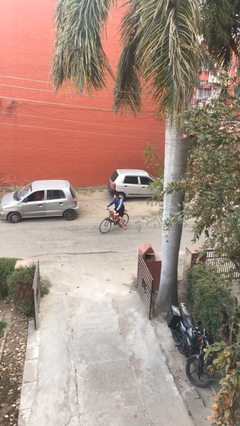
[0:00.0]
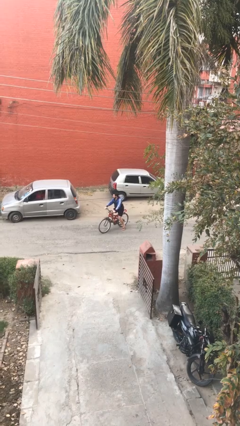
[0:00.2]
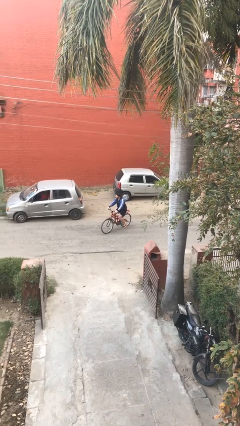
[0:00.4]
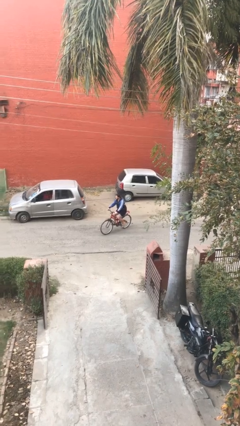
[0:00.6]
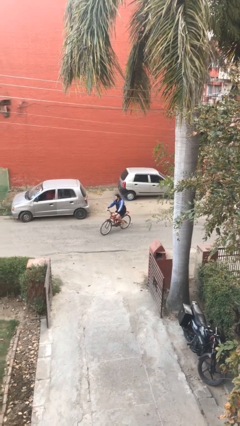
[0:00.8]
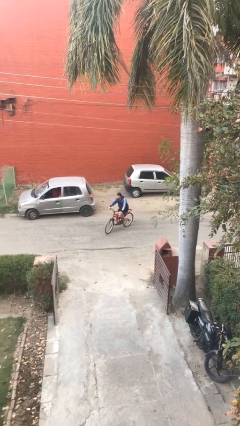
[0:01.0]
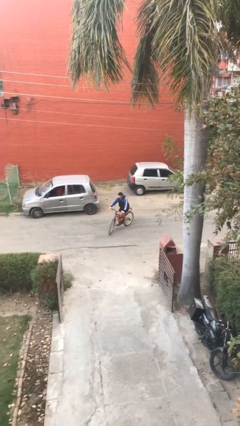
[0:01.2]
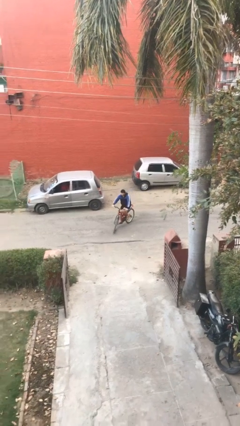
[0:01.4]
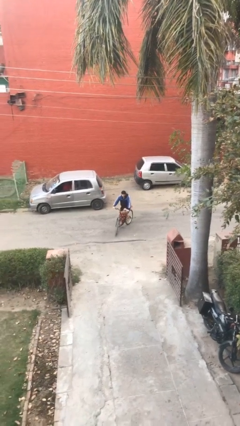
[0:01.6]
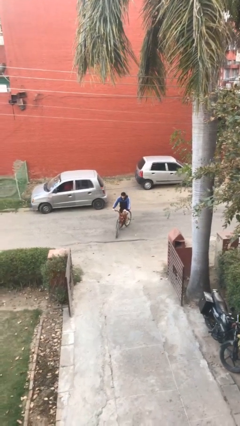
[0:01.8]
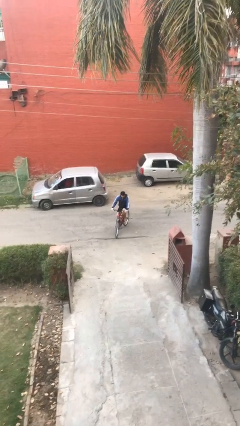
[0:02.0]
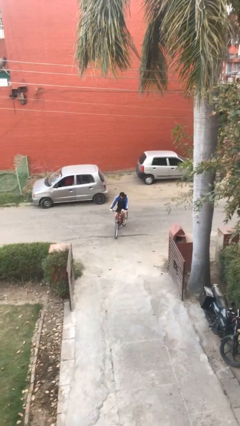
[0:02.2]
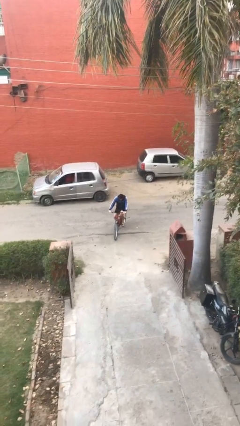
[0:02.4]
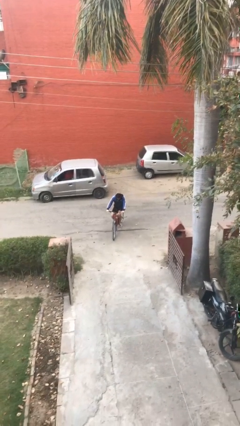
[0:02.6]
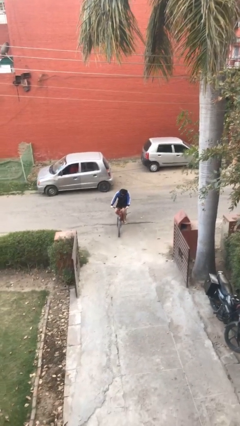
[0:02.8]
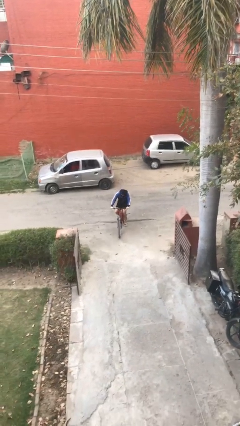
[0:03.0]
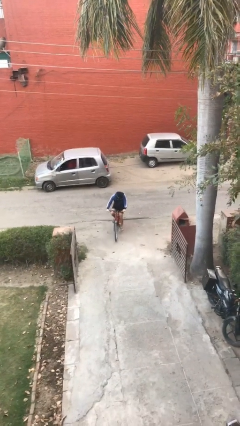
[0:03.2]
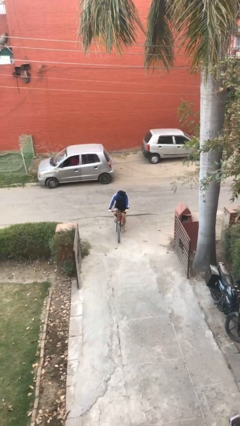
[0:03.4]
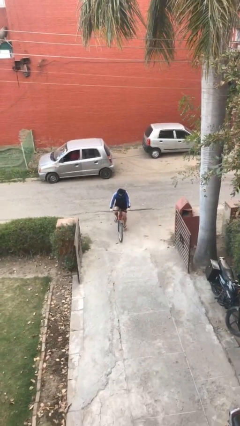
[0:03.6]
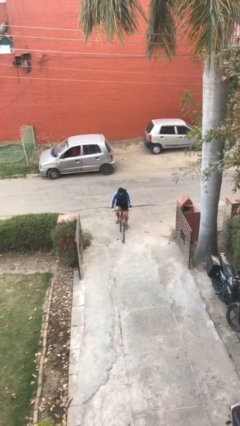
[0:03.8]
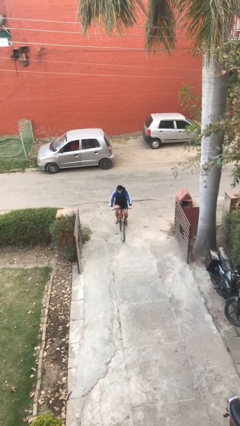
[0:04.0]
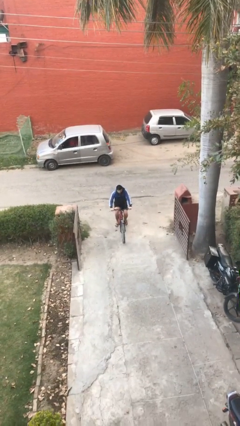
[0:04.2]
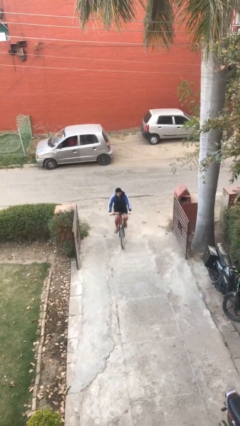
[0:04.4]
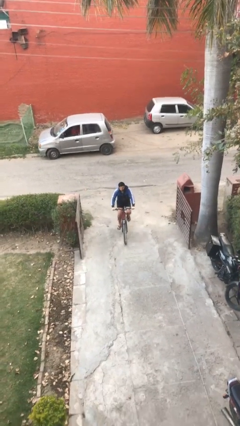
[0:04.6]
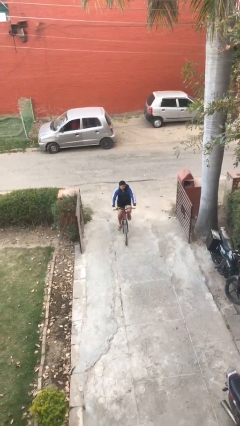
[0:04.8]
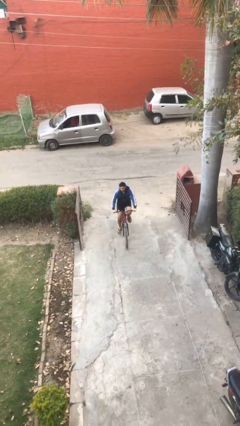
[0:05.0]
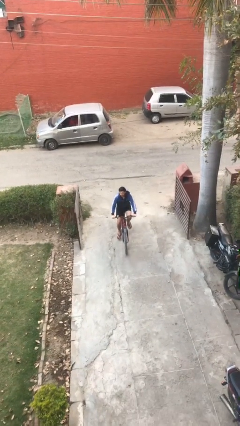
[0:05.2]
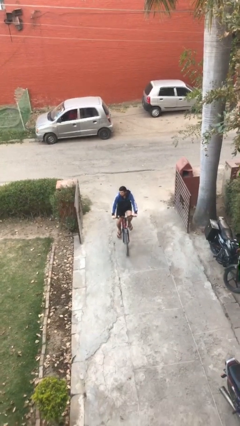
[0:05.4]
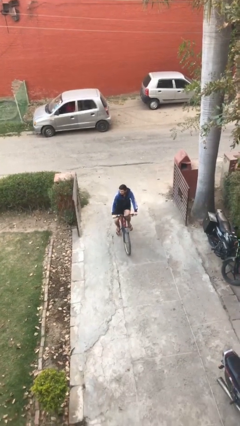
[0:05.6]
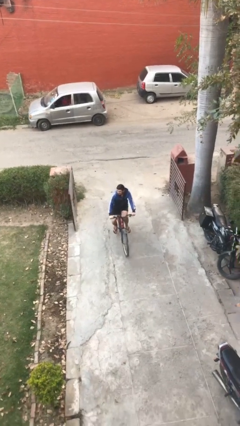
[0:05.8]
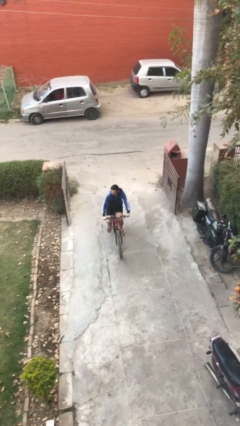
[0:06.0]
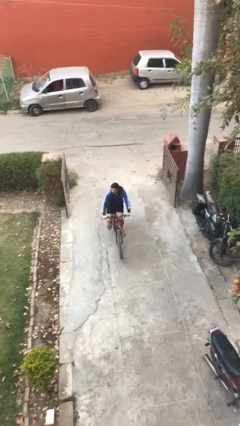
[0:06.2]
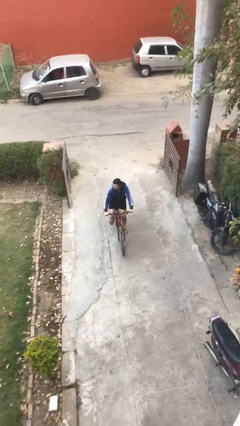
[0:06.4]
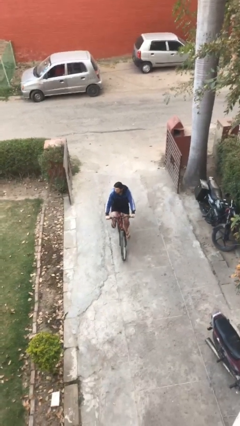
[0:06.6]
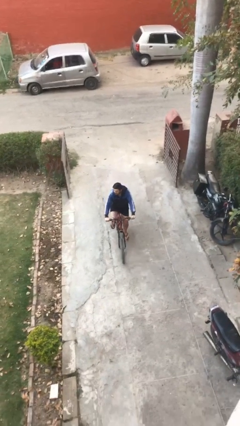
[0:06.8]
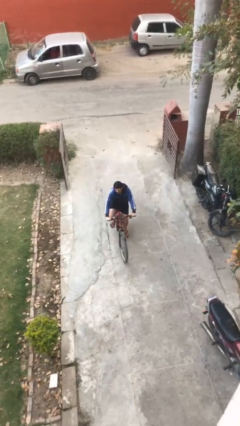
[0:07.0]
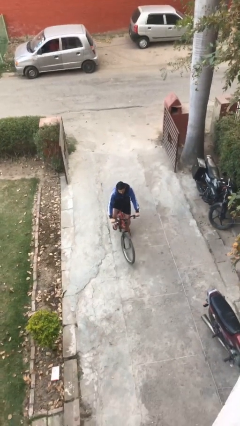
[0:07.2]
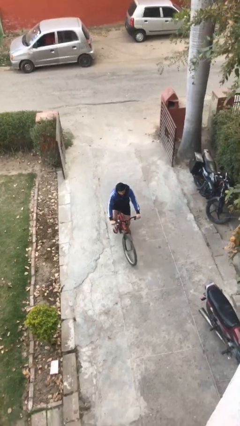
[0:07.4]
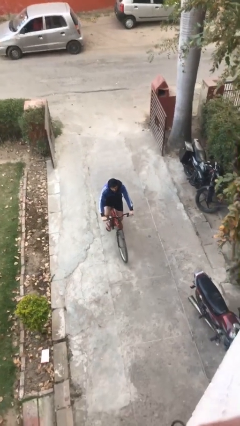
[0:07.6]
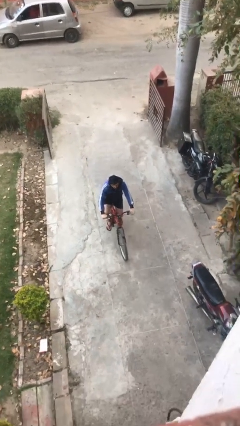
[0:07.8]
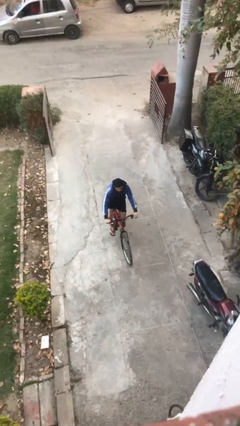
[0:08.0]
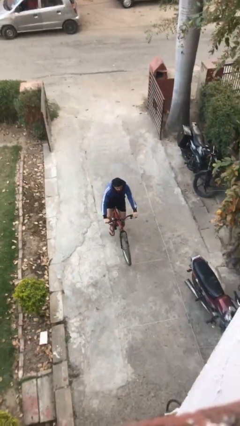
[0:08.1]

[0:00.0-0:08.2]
person rides bicycle

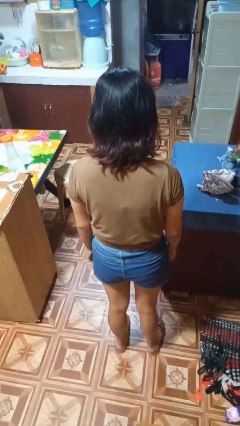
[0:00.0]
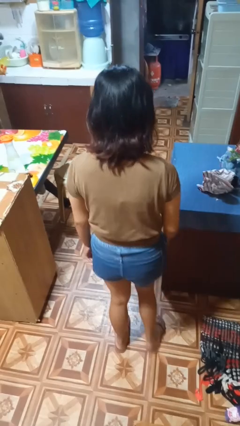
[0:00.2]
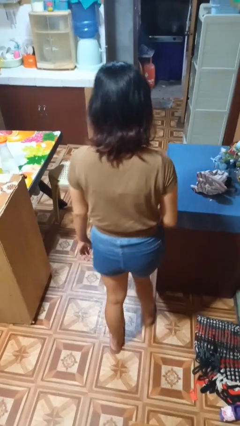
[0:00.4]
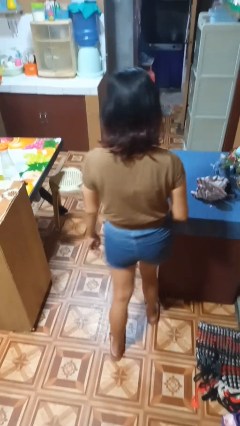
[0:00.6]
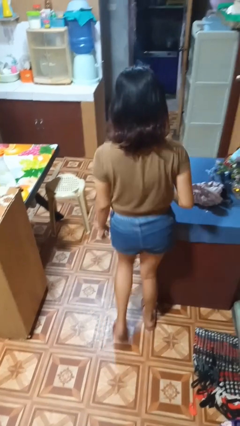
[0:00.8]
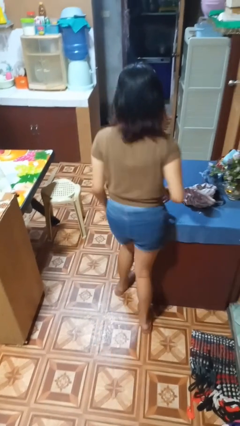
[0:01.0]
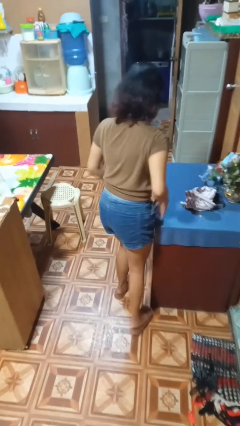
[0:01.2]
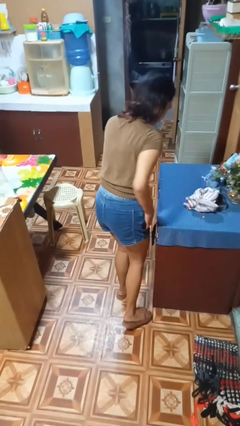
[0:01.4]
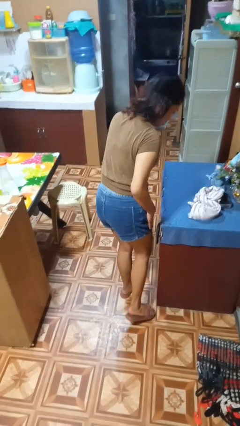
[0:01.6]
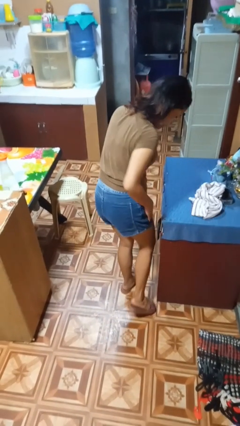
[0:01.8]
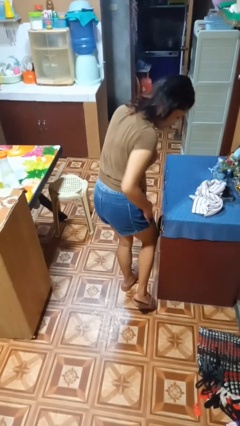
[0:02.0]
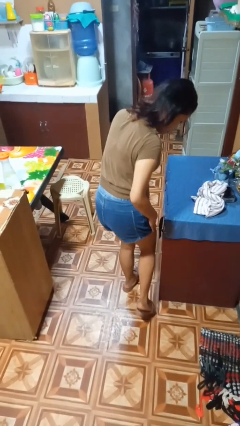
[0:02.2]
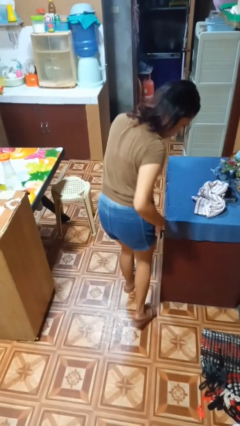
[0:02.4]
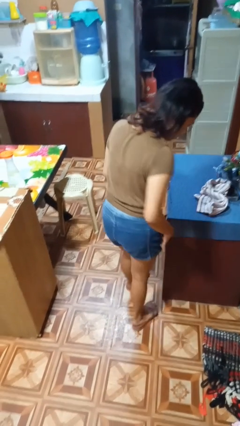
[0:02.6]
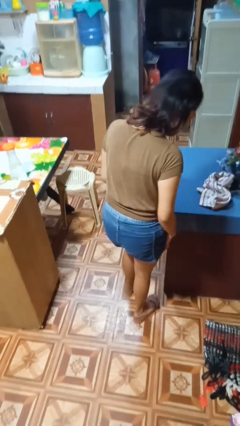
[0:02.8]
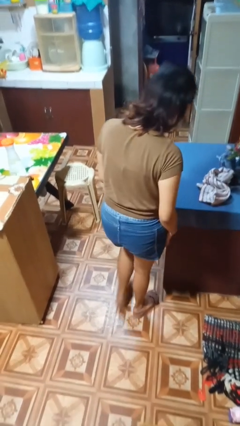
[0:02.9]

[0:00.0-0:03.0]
person bumps into table

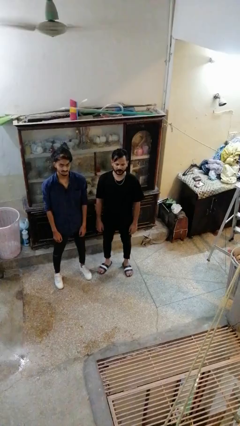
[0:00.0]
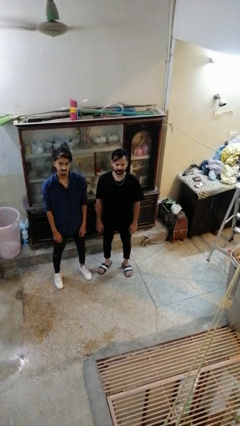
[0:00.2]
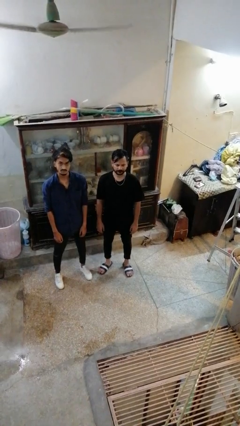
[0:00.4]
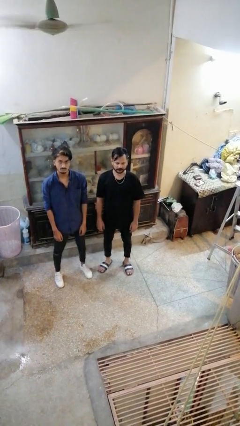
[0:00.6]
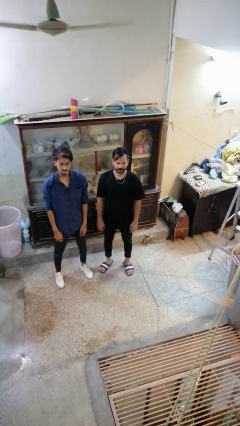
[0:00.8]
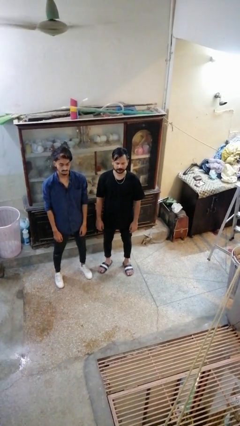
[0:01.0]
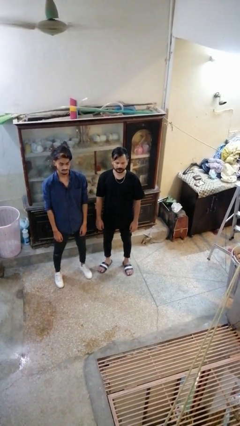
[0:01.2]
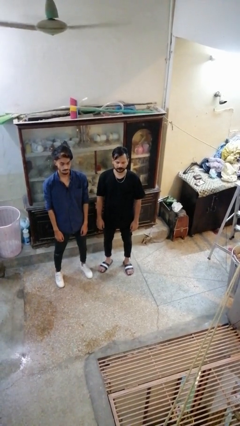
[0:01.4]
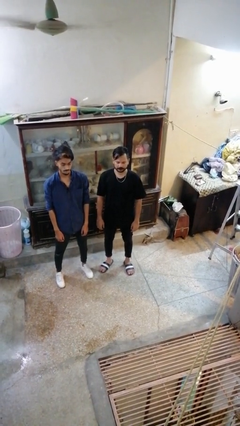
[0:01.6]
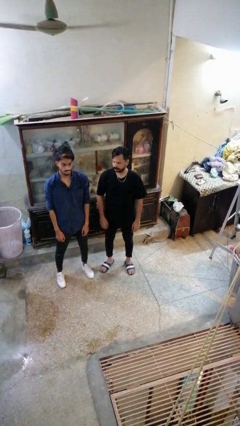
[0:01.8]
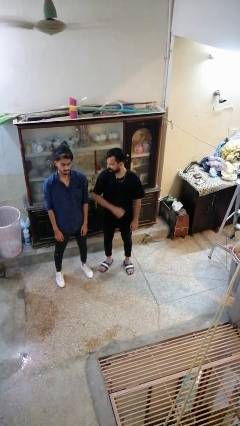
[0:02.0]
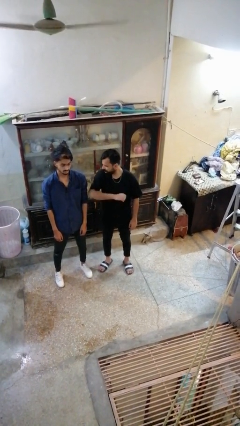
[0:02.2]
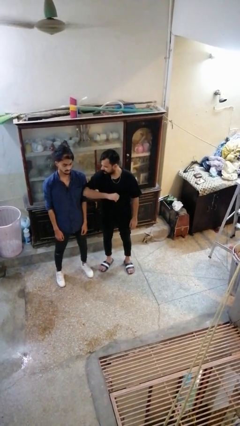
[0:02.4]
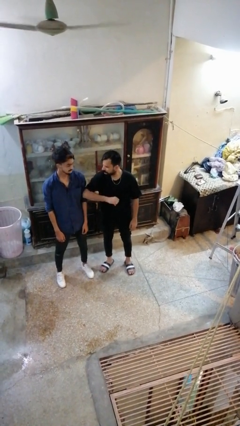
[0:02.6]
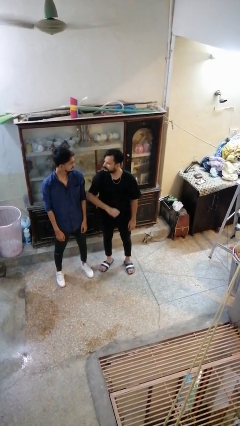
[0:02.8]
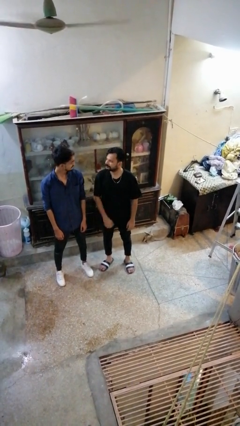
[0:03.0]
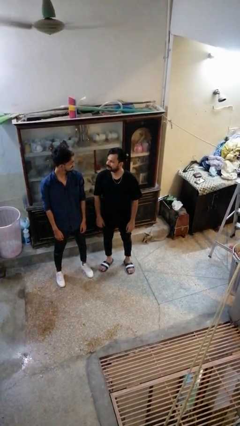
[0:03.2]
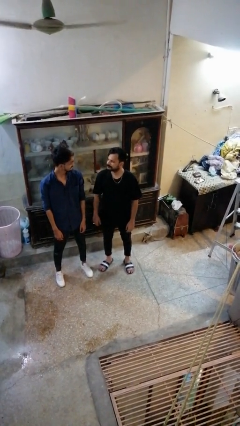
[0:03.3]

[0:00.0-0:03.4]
person nudges person with elbow

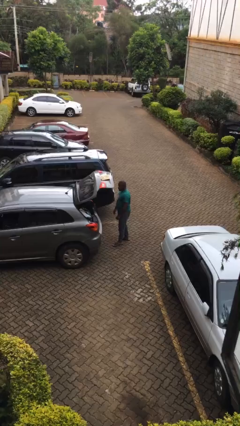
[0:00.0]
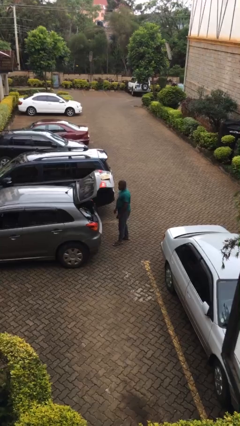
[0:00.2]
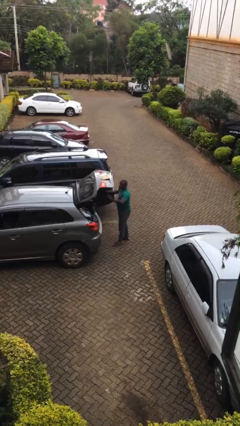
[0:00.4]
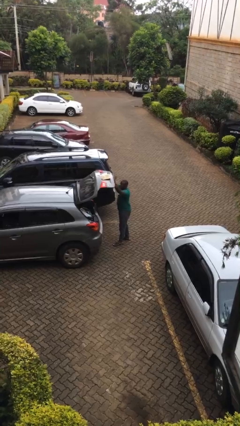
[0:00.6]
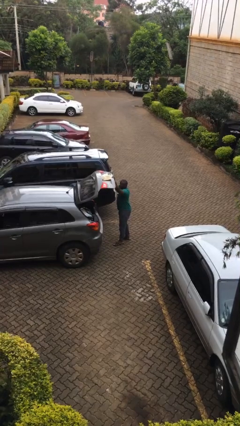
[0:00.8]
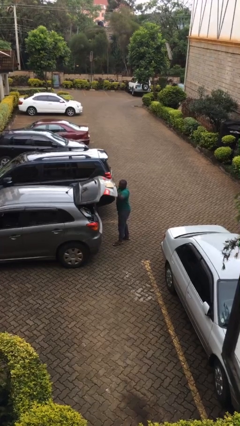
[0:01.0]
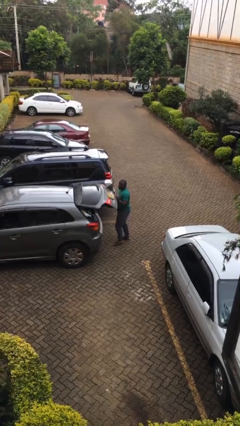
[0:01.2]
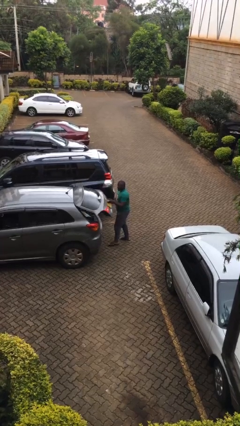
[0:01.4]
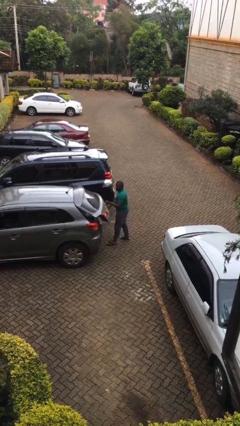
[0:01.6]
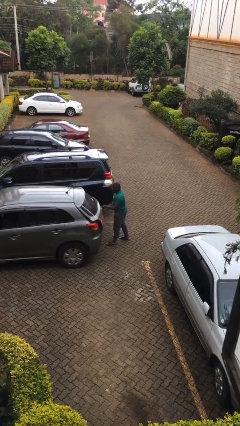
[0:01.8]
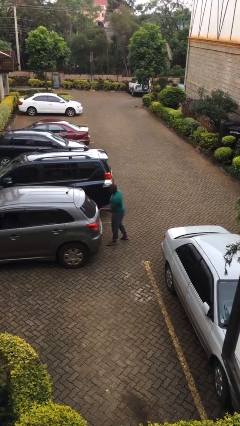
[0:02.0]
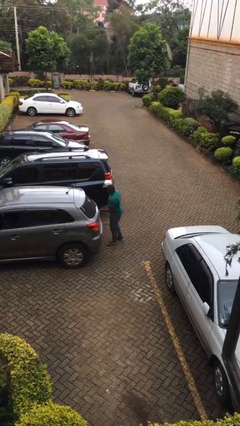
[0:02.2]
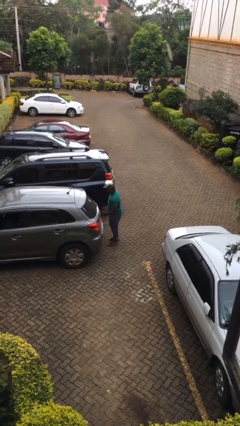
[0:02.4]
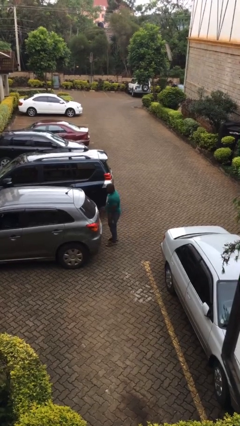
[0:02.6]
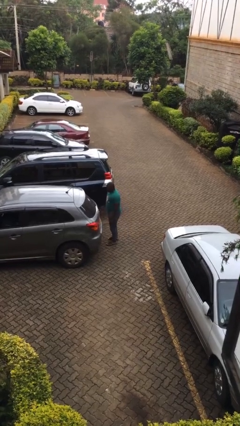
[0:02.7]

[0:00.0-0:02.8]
person closes car trunk

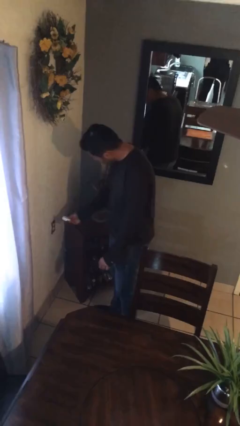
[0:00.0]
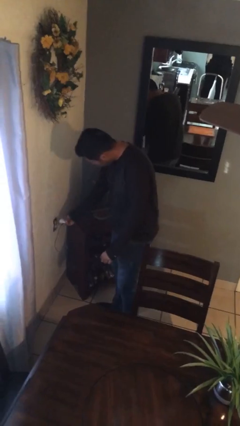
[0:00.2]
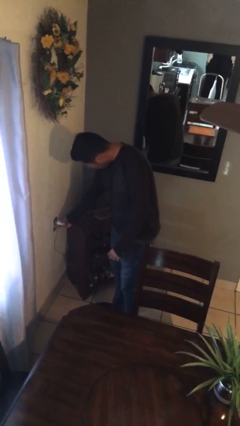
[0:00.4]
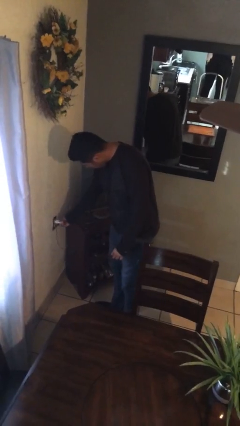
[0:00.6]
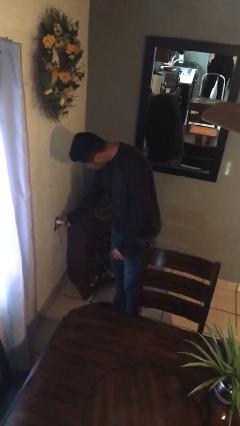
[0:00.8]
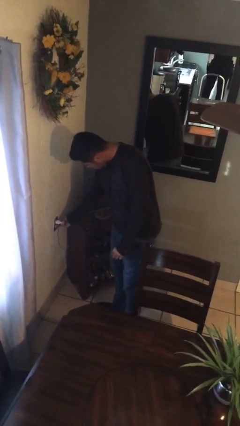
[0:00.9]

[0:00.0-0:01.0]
person pushes wheeled trashcan
